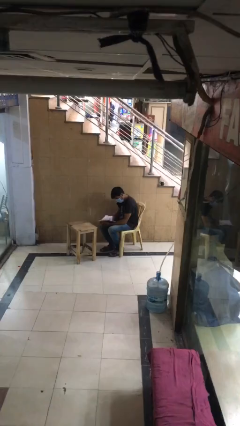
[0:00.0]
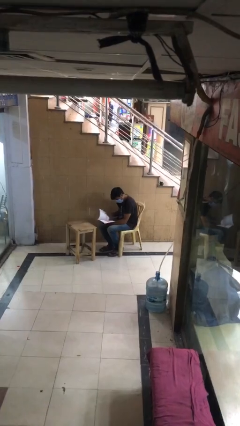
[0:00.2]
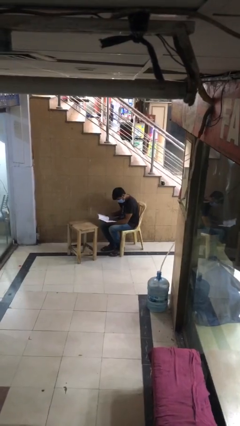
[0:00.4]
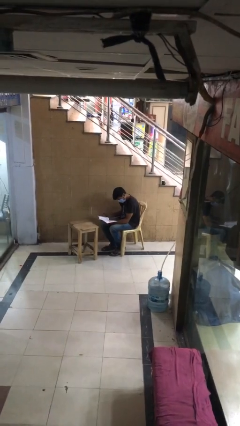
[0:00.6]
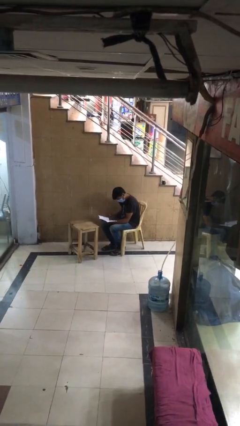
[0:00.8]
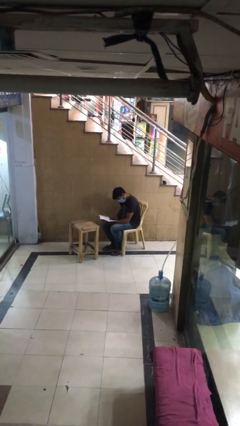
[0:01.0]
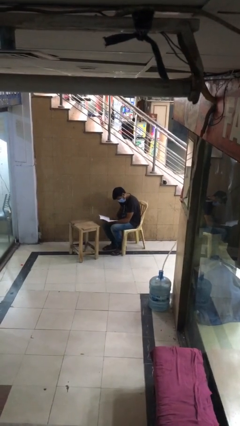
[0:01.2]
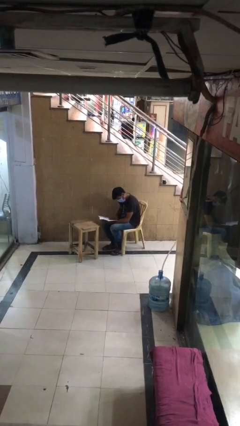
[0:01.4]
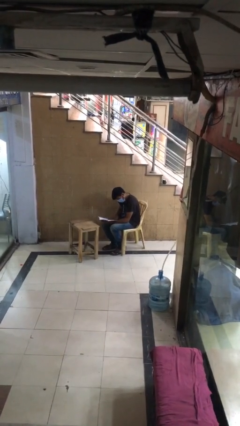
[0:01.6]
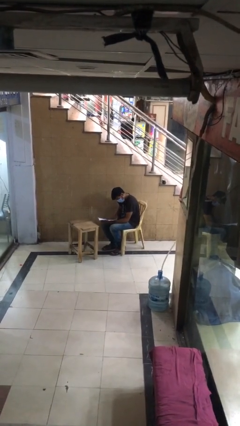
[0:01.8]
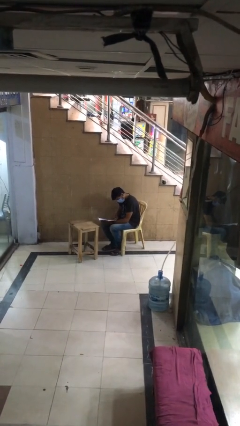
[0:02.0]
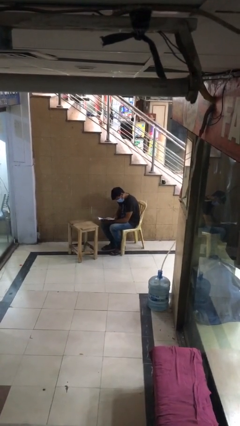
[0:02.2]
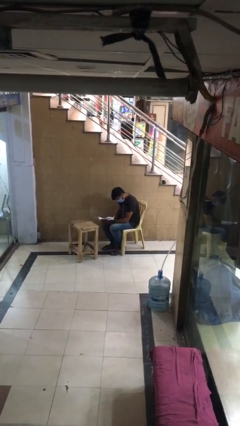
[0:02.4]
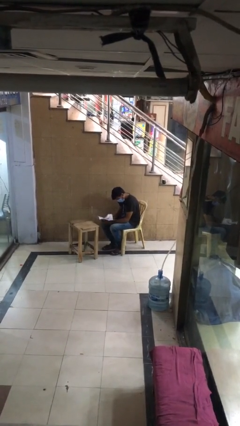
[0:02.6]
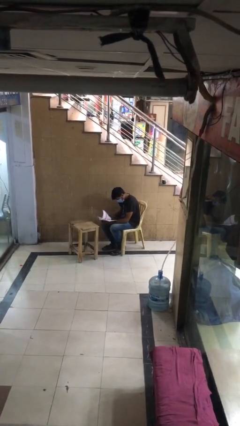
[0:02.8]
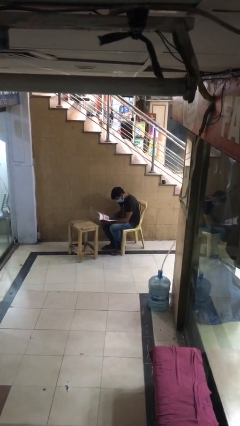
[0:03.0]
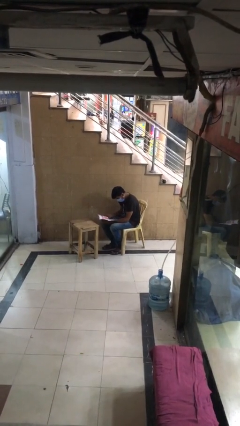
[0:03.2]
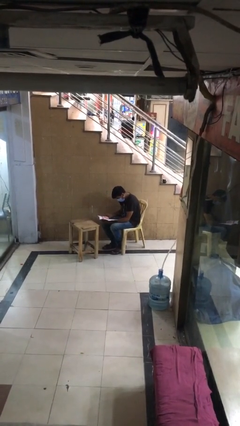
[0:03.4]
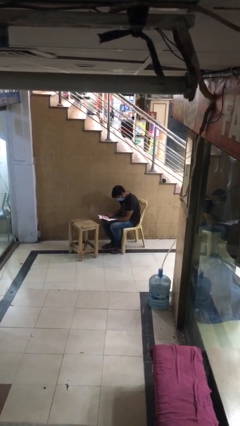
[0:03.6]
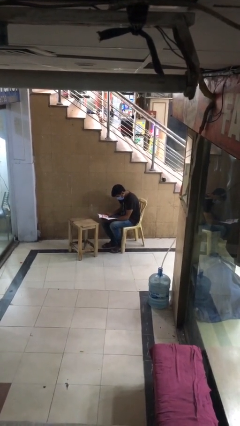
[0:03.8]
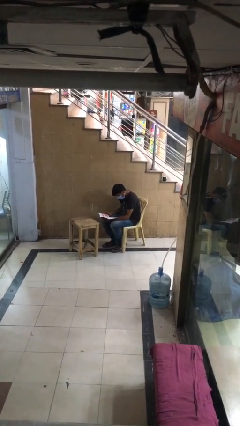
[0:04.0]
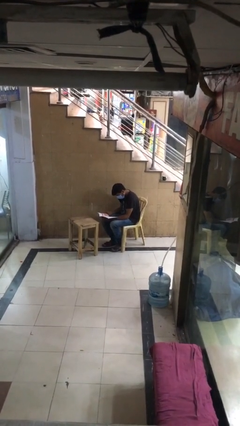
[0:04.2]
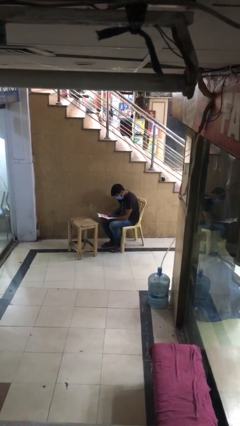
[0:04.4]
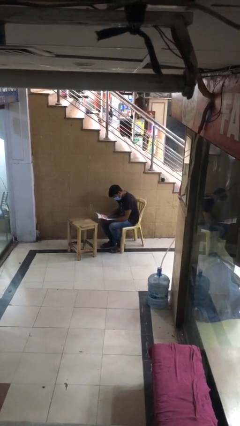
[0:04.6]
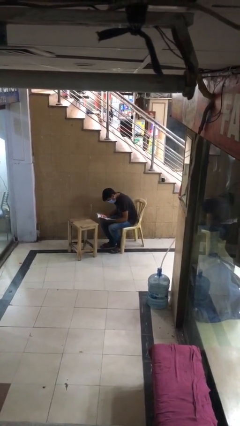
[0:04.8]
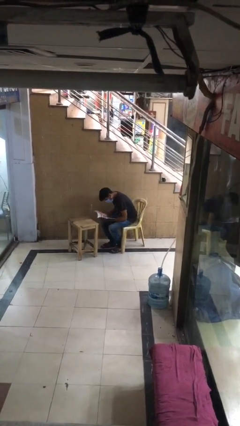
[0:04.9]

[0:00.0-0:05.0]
person reads document

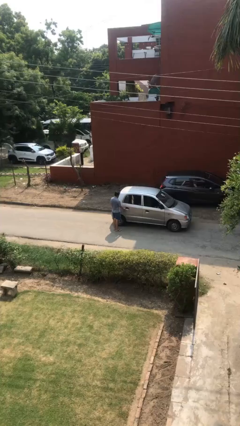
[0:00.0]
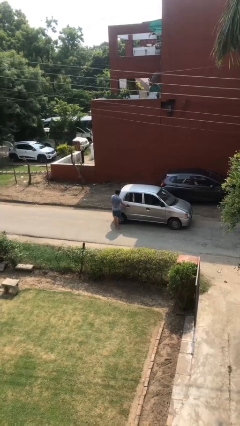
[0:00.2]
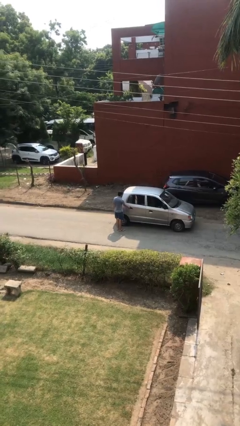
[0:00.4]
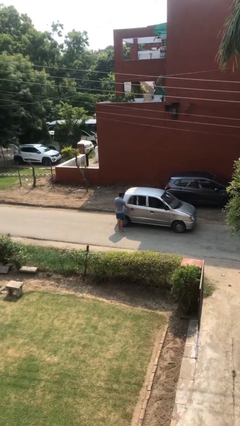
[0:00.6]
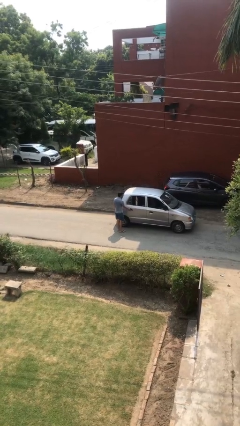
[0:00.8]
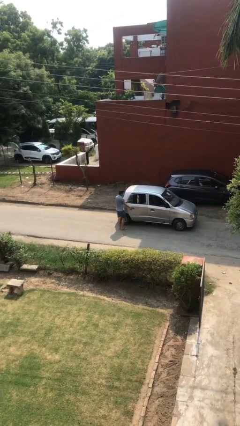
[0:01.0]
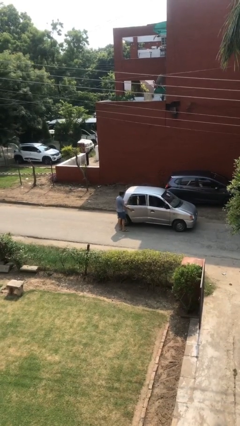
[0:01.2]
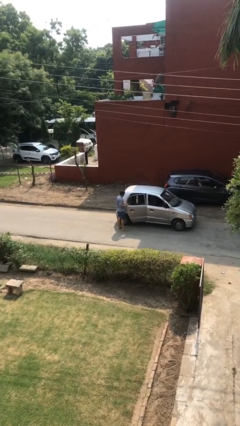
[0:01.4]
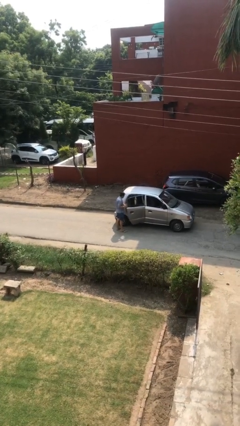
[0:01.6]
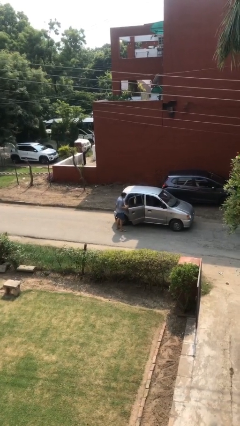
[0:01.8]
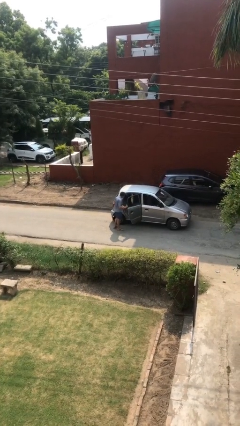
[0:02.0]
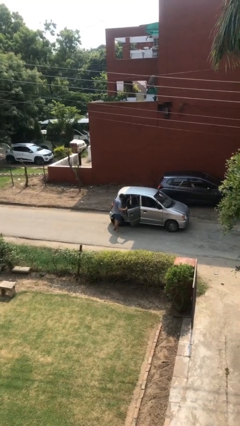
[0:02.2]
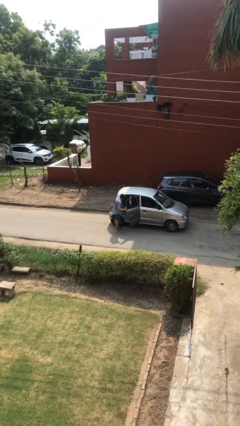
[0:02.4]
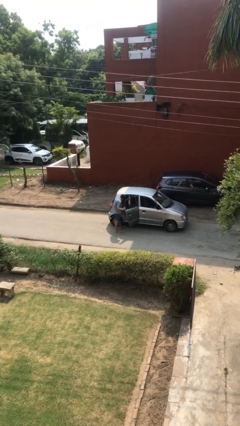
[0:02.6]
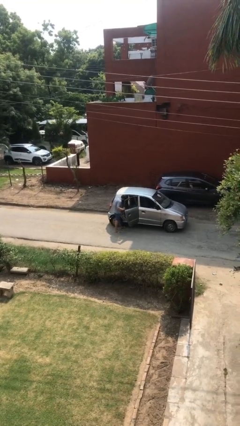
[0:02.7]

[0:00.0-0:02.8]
person opens car door

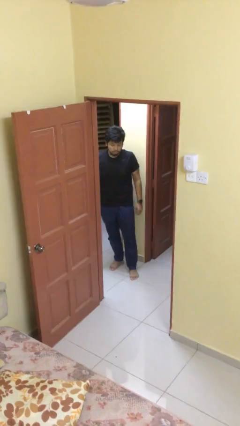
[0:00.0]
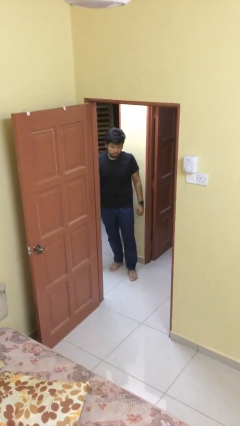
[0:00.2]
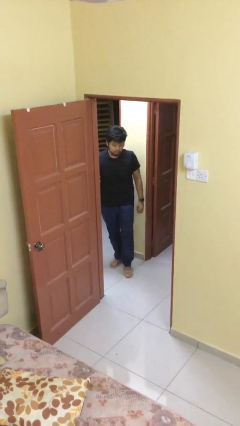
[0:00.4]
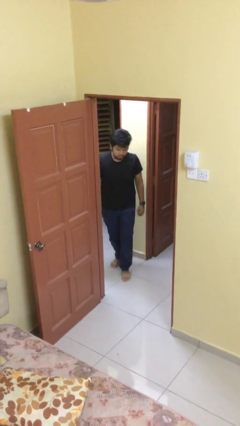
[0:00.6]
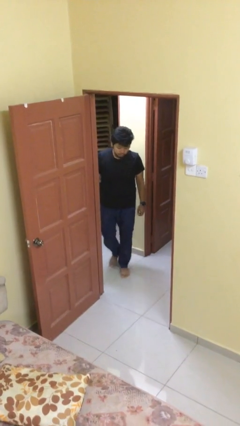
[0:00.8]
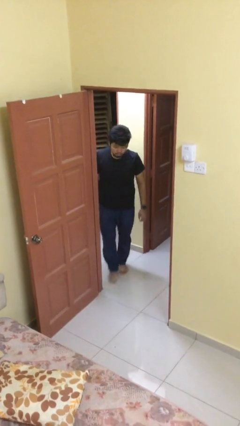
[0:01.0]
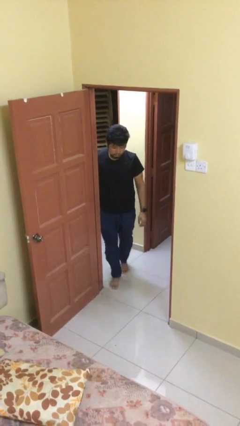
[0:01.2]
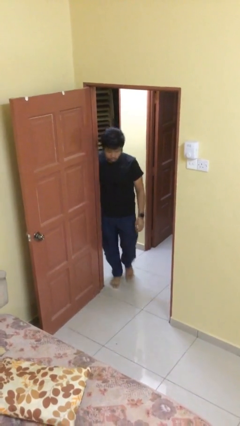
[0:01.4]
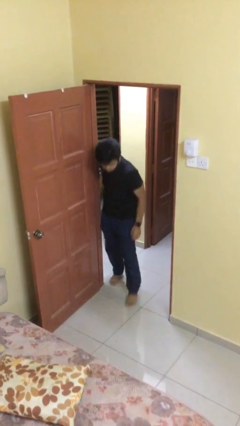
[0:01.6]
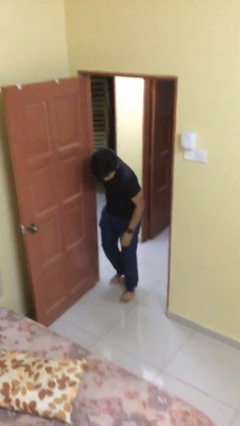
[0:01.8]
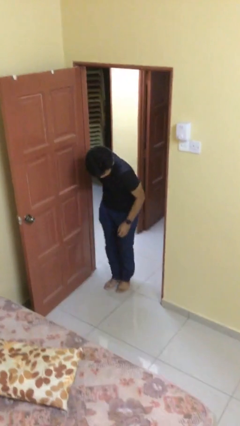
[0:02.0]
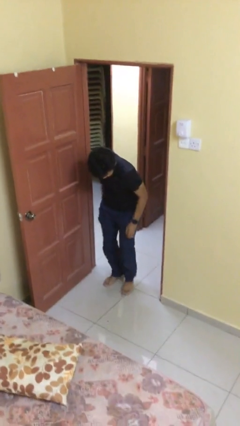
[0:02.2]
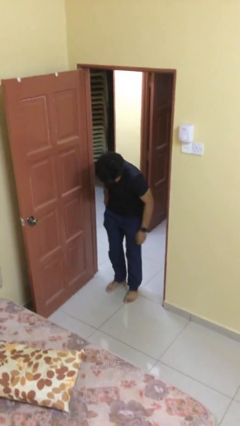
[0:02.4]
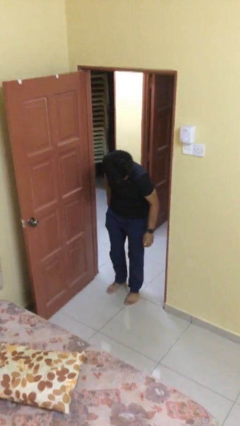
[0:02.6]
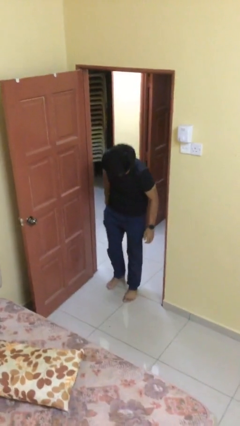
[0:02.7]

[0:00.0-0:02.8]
person bumps into wall

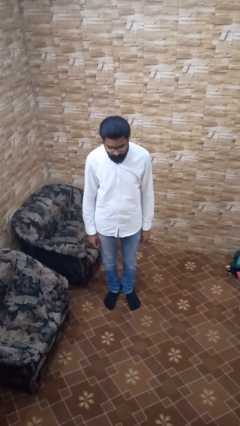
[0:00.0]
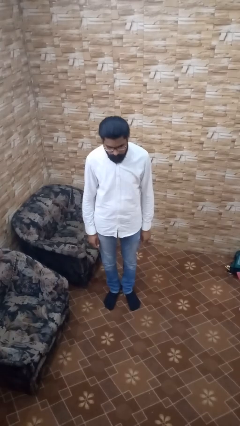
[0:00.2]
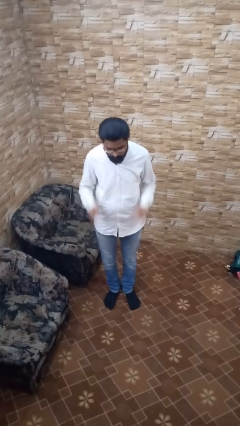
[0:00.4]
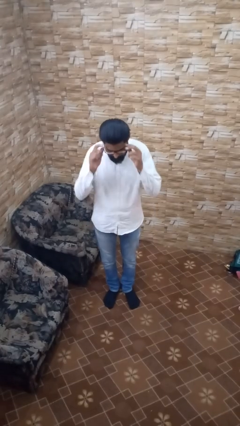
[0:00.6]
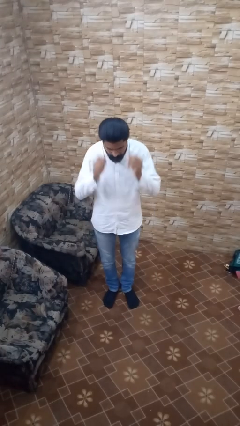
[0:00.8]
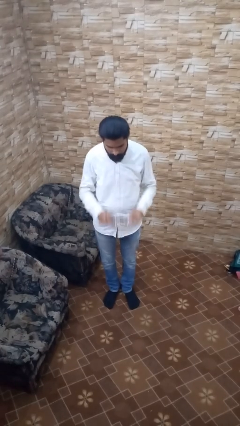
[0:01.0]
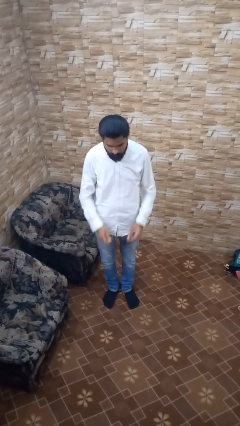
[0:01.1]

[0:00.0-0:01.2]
person takes off glasses

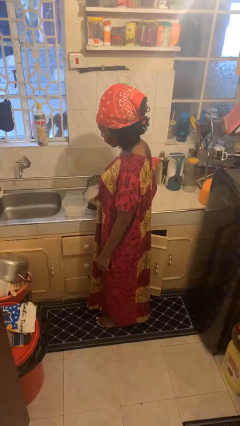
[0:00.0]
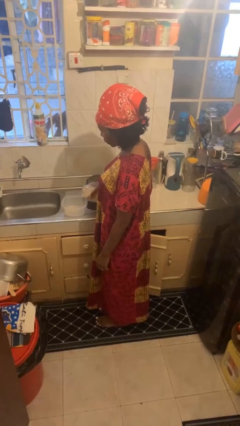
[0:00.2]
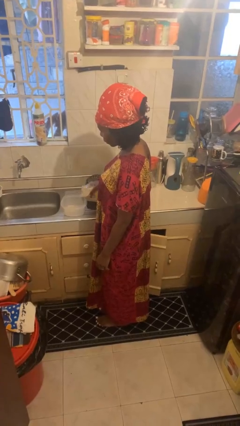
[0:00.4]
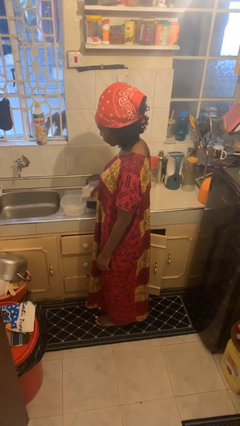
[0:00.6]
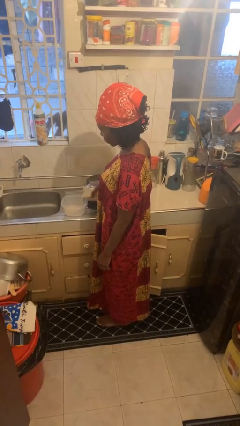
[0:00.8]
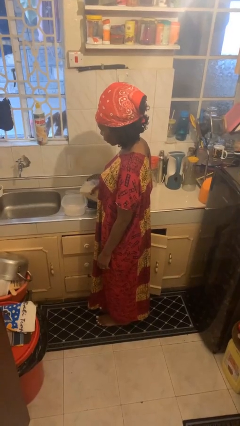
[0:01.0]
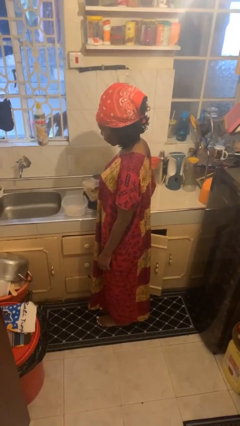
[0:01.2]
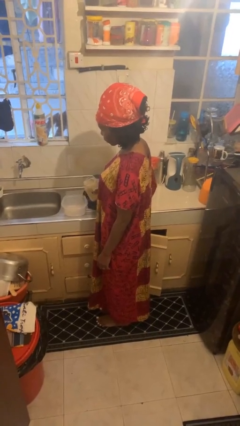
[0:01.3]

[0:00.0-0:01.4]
person pours into bowl

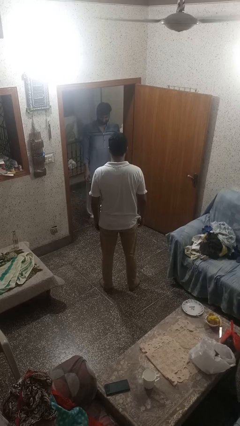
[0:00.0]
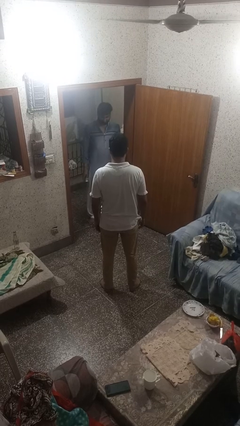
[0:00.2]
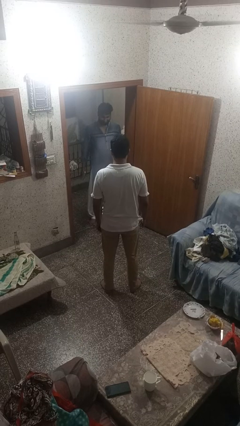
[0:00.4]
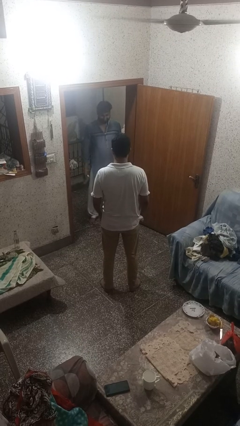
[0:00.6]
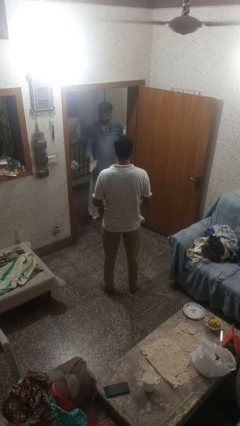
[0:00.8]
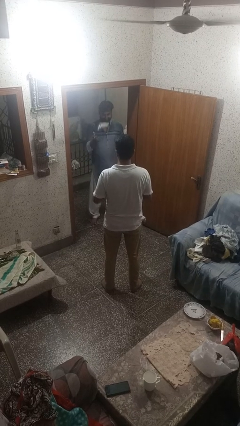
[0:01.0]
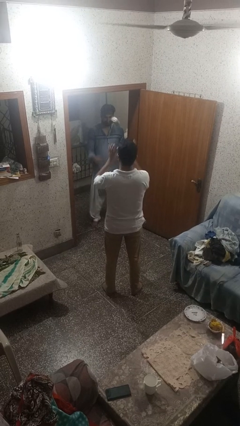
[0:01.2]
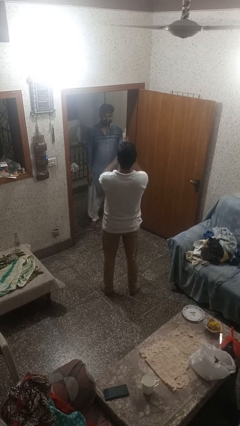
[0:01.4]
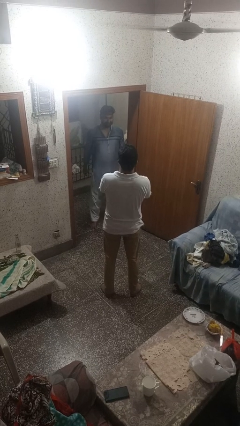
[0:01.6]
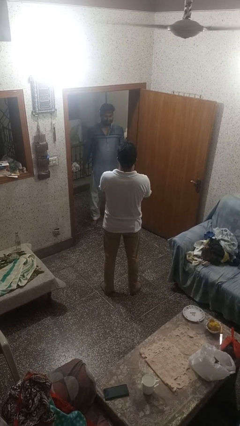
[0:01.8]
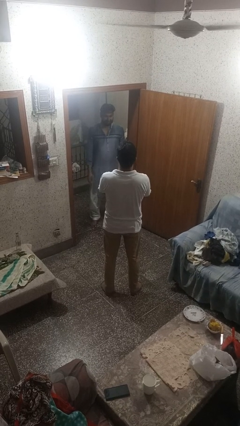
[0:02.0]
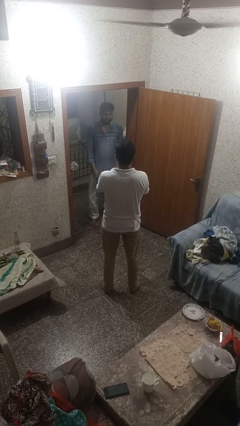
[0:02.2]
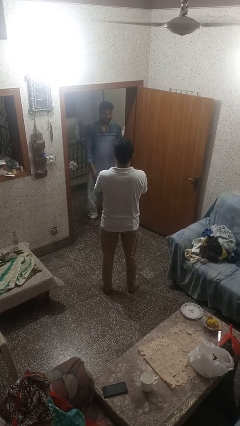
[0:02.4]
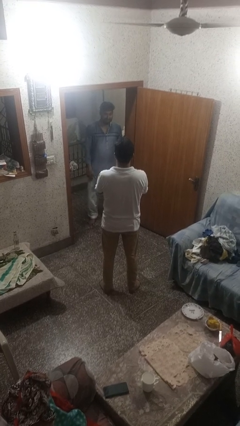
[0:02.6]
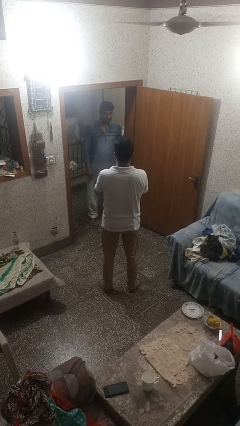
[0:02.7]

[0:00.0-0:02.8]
person catches object from person

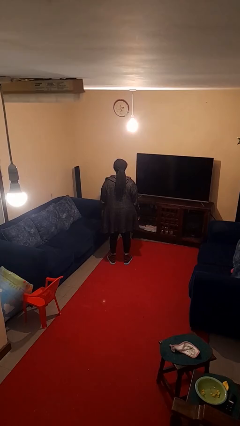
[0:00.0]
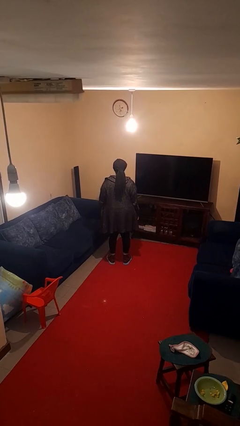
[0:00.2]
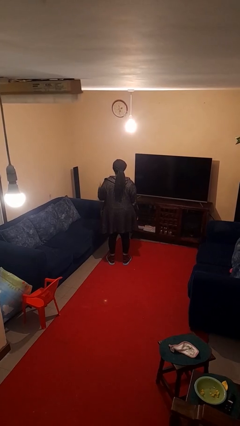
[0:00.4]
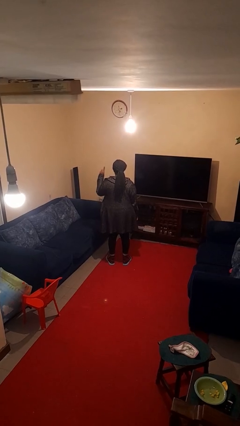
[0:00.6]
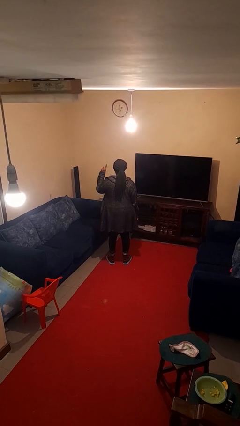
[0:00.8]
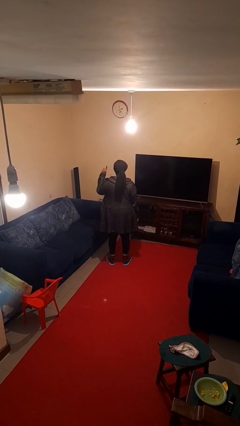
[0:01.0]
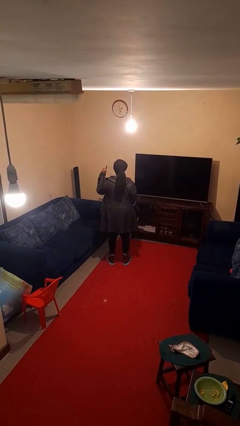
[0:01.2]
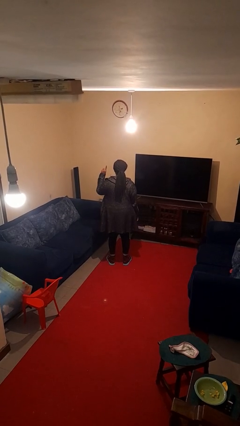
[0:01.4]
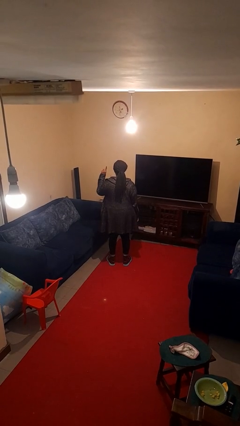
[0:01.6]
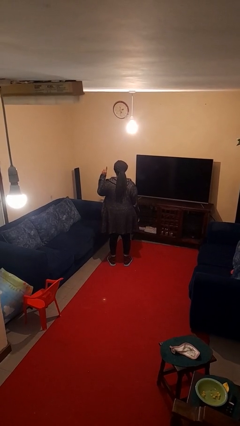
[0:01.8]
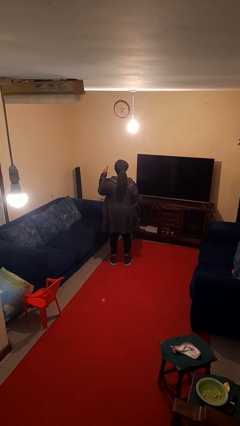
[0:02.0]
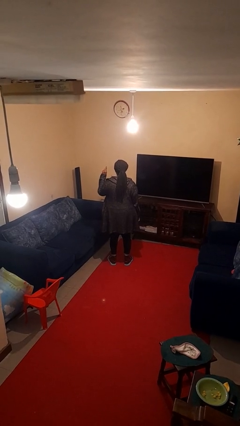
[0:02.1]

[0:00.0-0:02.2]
person gestures number one
